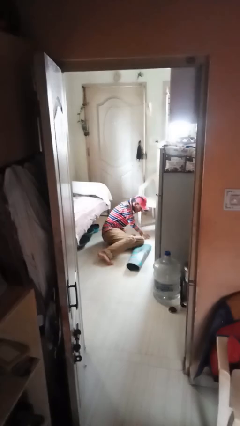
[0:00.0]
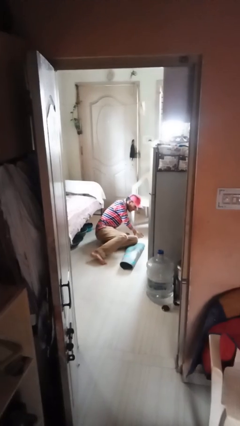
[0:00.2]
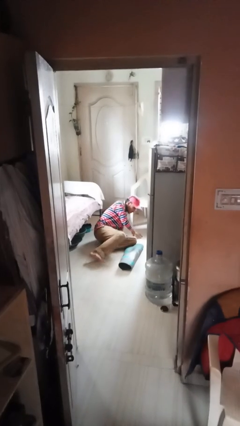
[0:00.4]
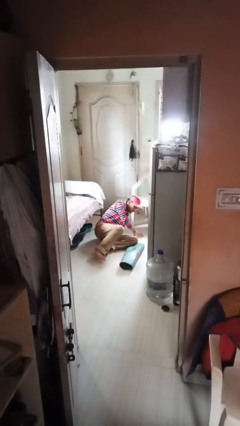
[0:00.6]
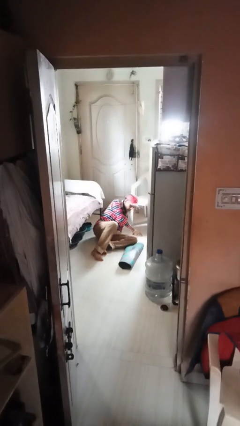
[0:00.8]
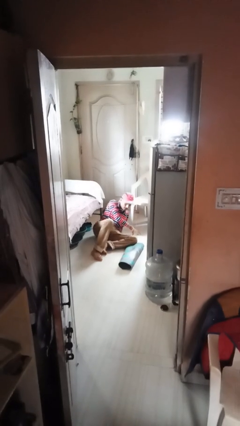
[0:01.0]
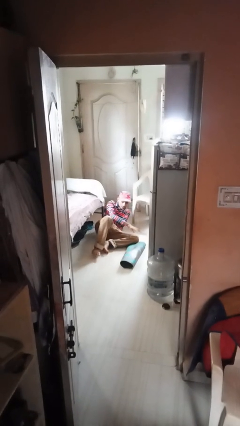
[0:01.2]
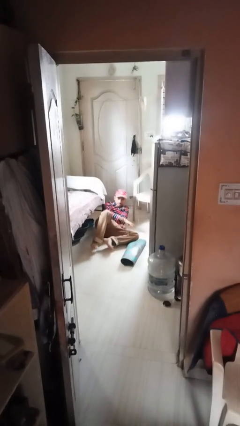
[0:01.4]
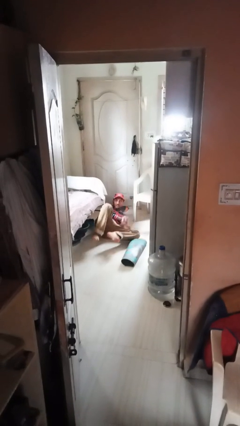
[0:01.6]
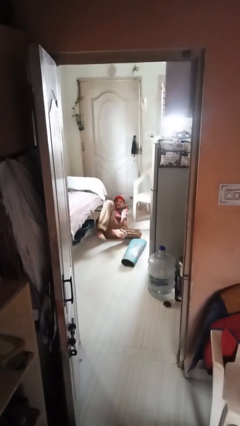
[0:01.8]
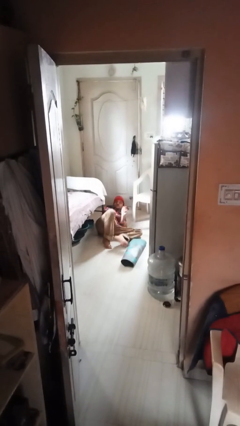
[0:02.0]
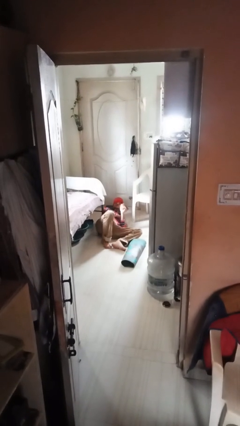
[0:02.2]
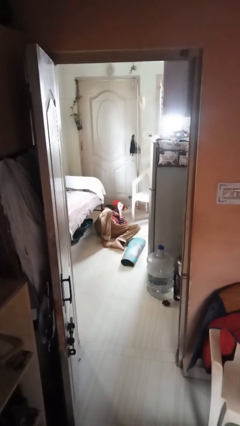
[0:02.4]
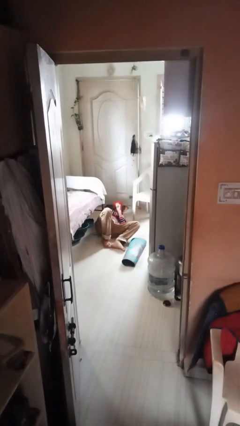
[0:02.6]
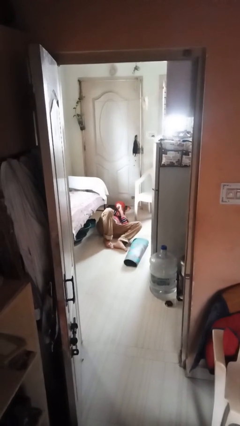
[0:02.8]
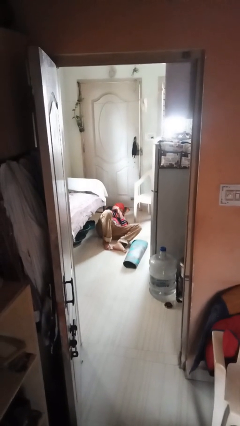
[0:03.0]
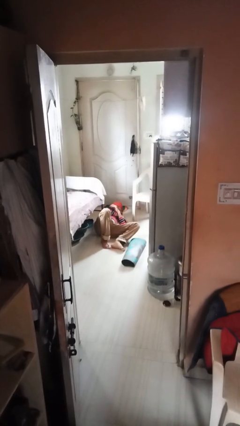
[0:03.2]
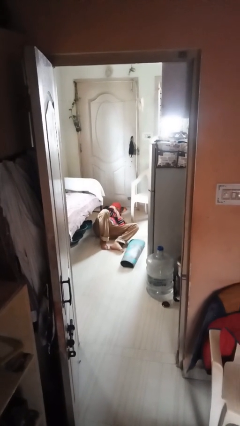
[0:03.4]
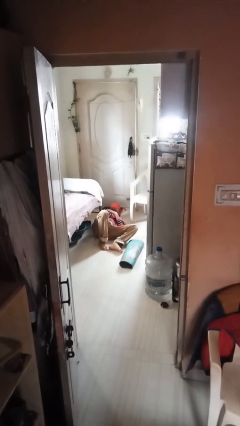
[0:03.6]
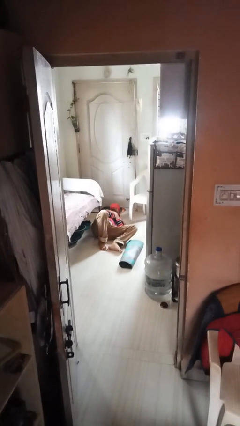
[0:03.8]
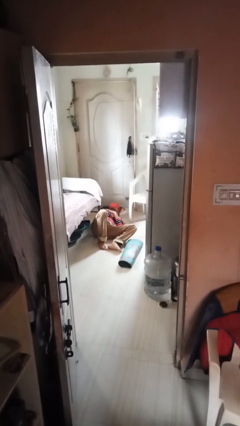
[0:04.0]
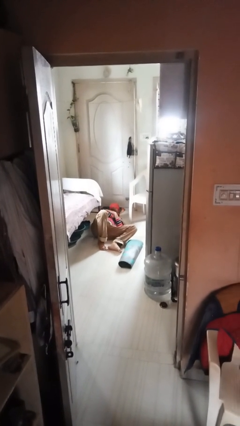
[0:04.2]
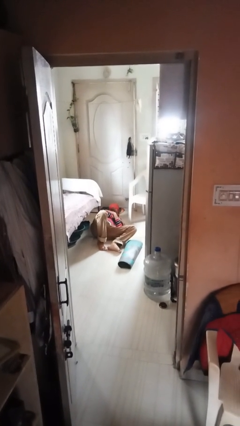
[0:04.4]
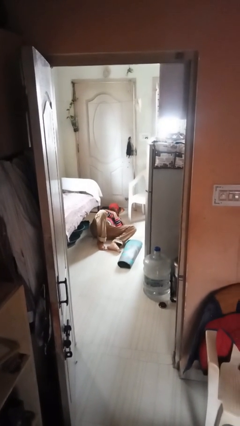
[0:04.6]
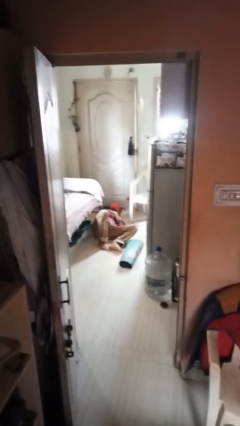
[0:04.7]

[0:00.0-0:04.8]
person lies down on floor

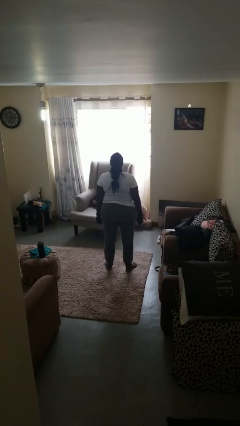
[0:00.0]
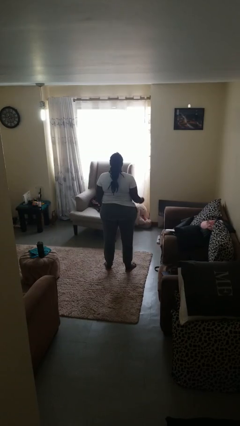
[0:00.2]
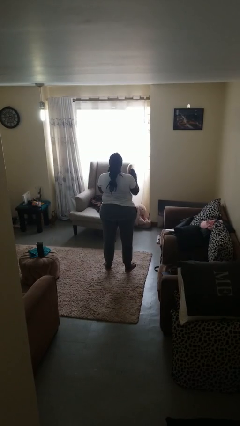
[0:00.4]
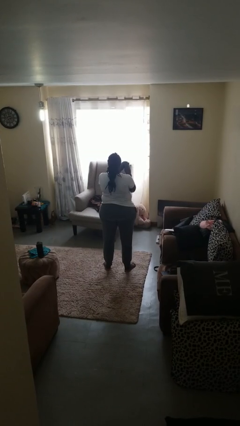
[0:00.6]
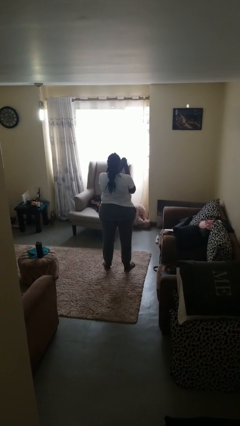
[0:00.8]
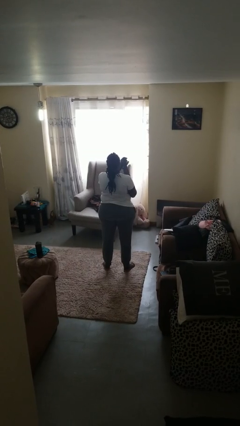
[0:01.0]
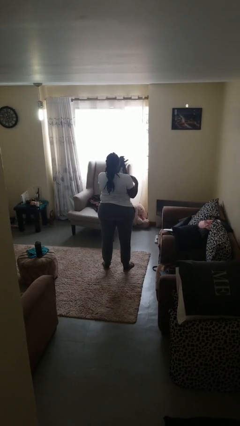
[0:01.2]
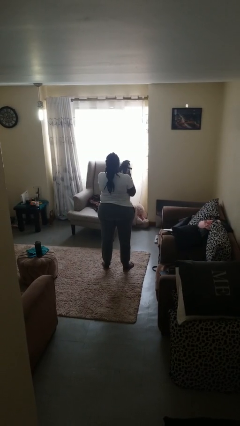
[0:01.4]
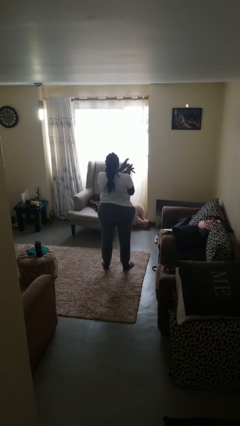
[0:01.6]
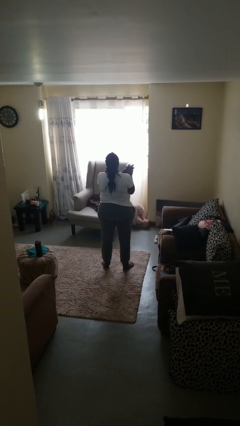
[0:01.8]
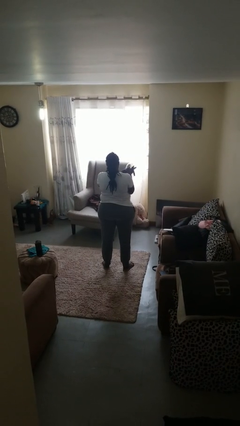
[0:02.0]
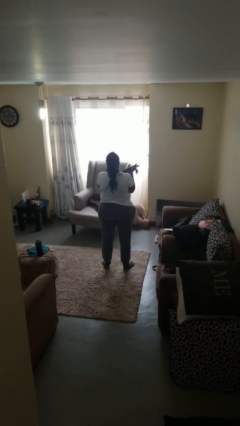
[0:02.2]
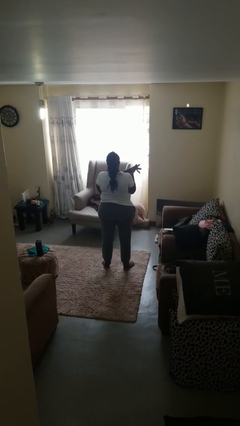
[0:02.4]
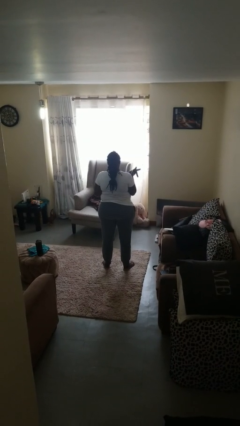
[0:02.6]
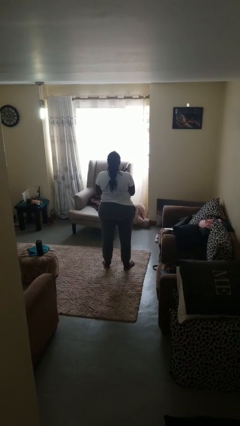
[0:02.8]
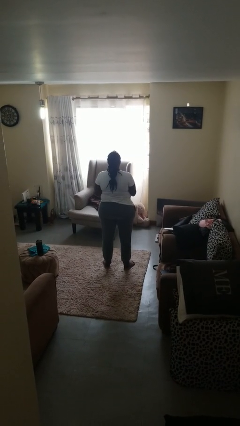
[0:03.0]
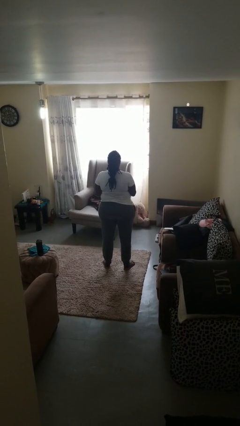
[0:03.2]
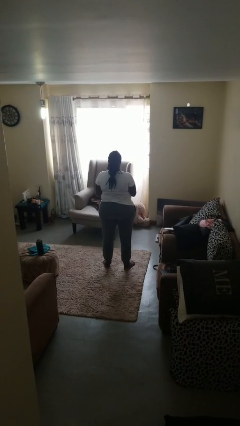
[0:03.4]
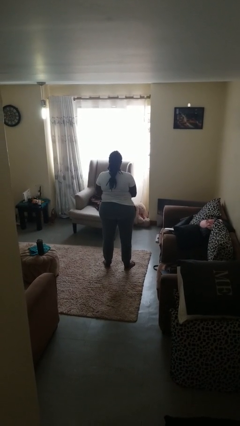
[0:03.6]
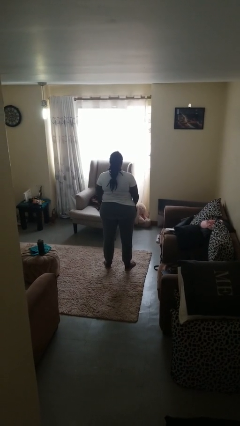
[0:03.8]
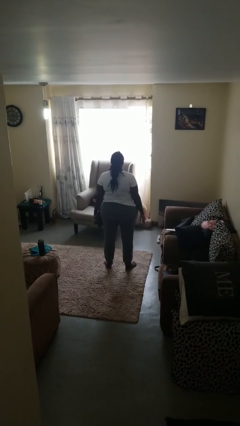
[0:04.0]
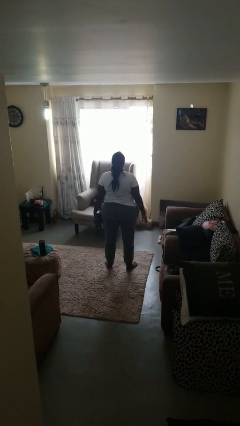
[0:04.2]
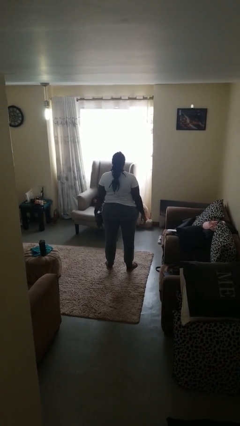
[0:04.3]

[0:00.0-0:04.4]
person takes off gloves

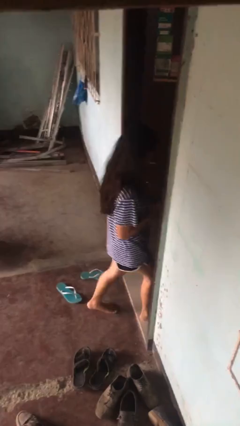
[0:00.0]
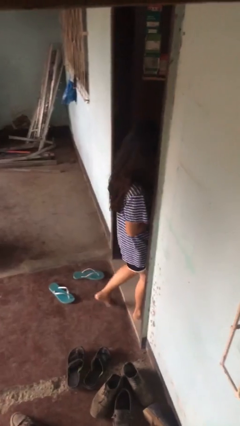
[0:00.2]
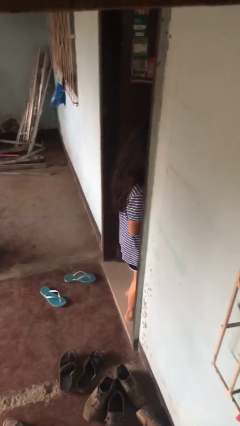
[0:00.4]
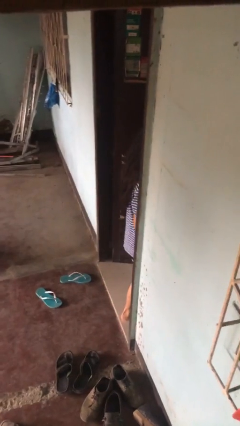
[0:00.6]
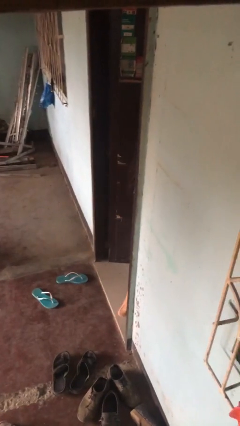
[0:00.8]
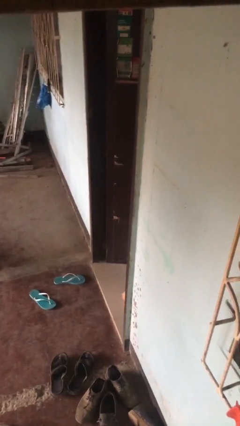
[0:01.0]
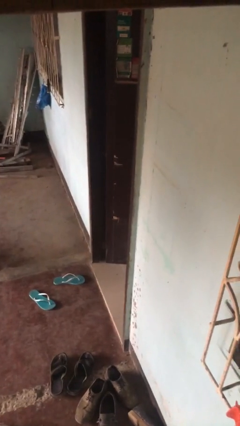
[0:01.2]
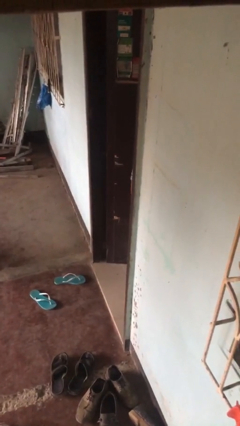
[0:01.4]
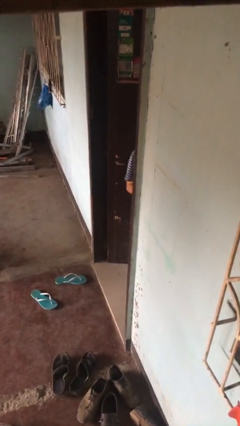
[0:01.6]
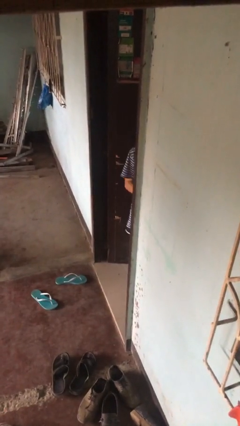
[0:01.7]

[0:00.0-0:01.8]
person enters scene through structure

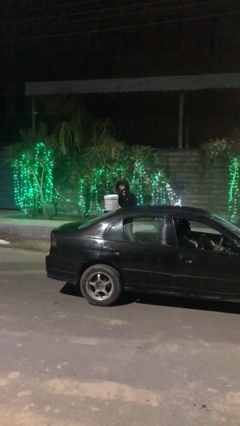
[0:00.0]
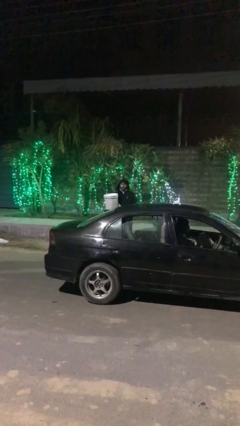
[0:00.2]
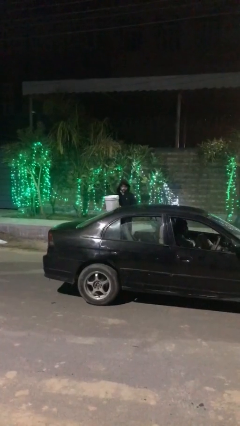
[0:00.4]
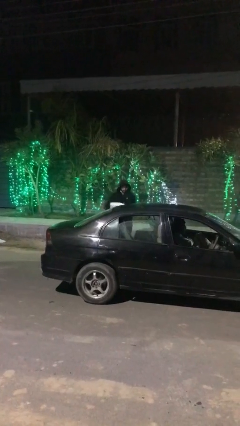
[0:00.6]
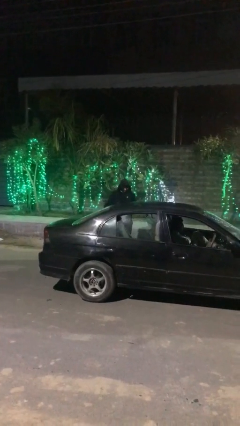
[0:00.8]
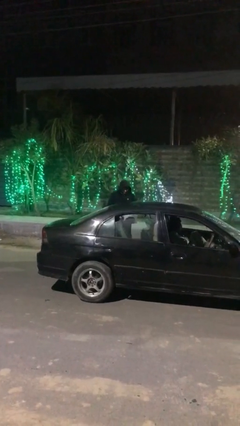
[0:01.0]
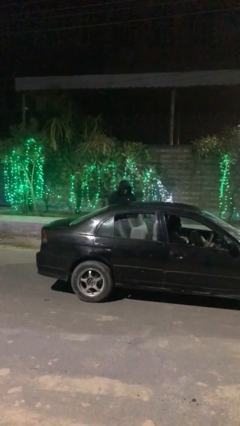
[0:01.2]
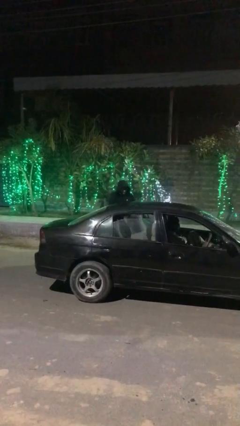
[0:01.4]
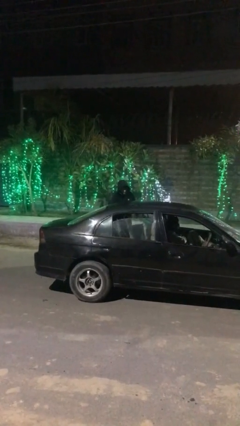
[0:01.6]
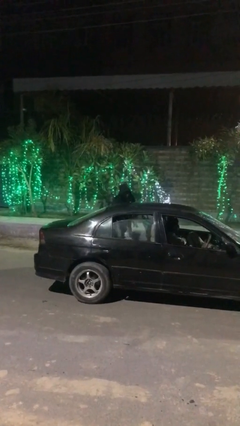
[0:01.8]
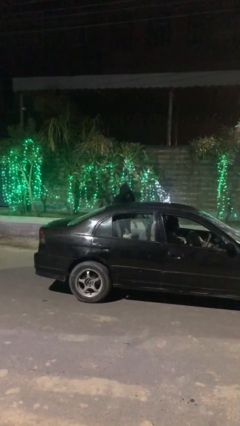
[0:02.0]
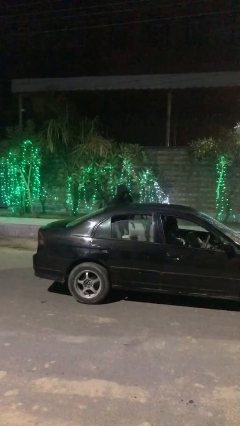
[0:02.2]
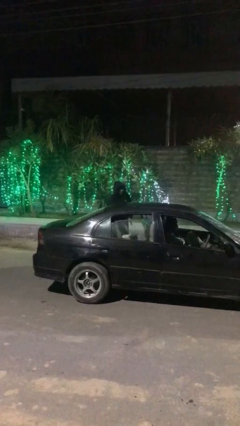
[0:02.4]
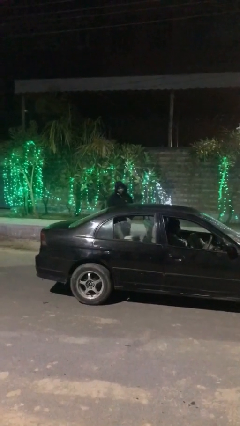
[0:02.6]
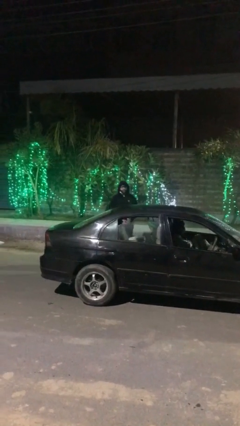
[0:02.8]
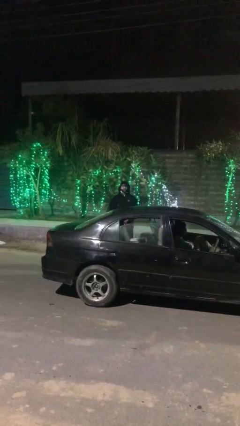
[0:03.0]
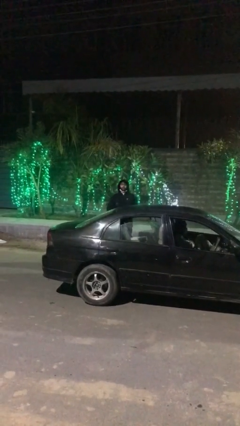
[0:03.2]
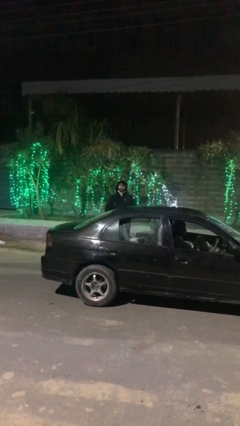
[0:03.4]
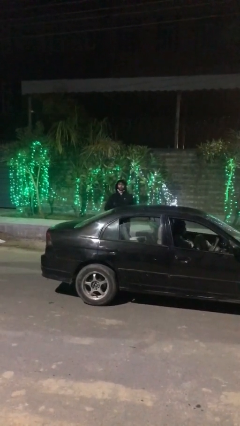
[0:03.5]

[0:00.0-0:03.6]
person loads car

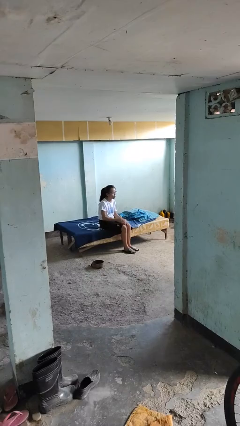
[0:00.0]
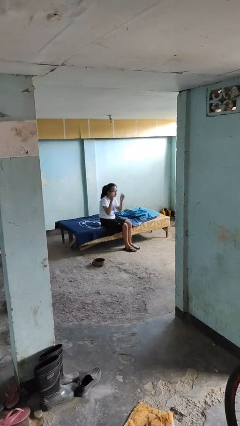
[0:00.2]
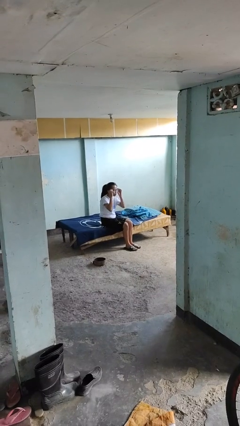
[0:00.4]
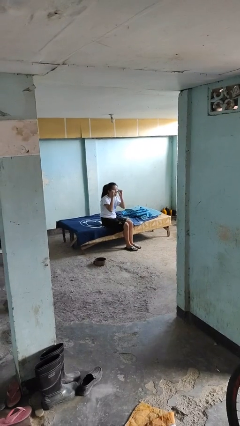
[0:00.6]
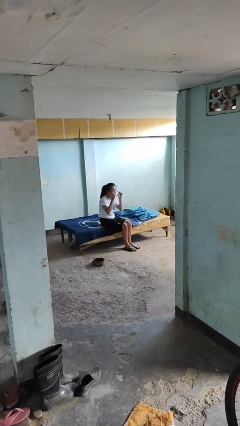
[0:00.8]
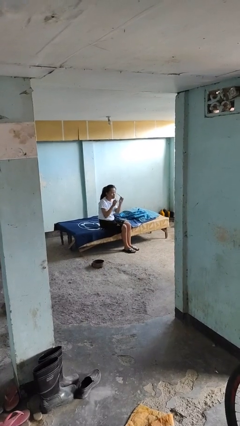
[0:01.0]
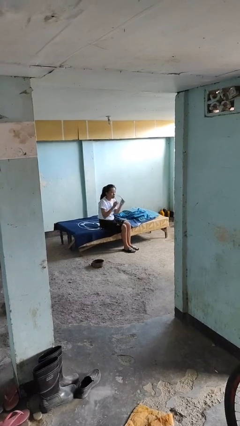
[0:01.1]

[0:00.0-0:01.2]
person takes off glasses

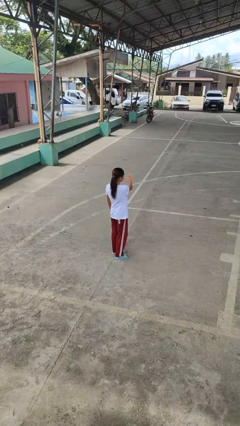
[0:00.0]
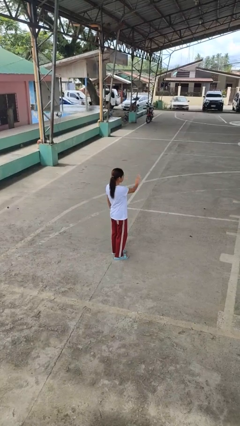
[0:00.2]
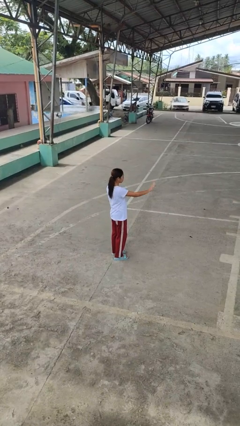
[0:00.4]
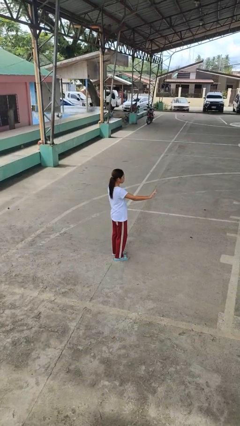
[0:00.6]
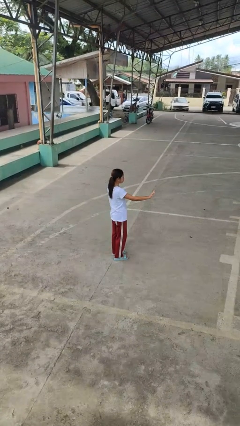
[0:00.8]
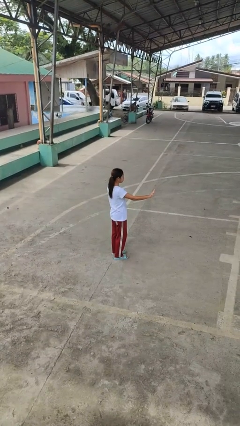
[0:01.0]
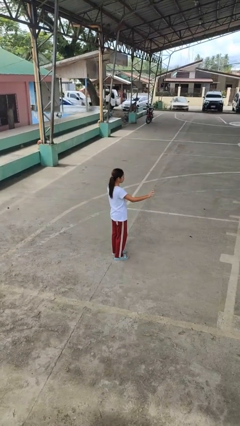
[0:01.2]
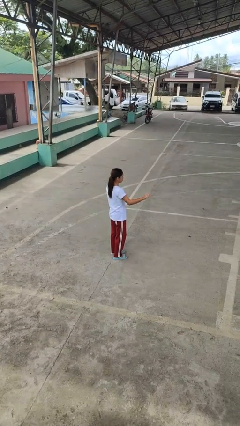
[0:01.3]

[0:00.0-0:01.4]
person gestures swipe right

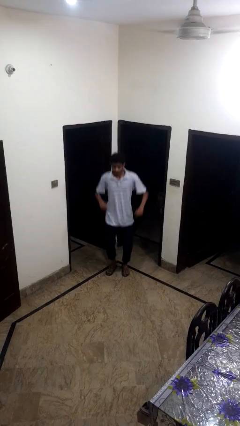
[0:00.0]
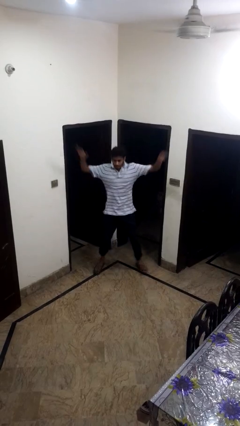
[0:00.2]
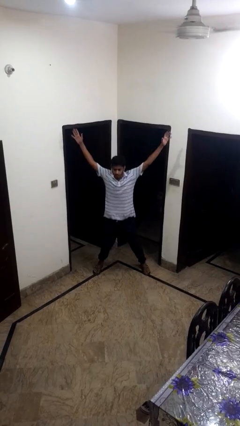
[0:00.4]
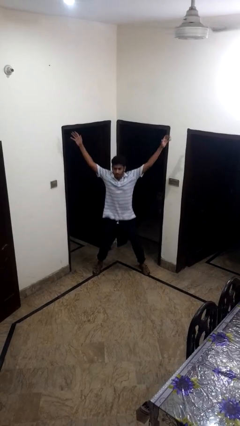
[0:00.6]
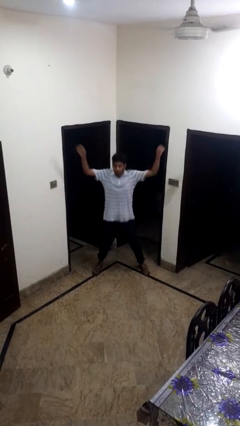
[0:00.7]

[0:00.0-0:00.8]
person exercises with jumping jacks
